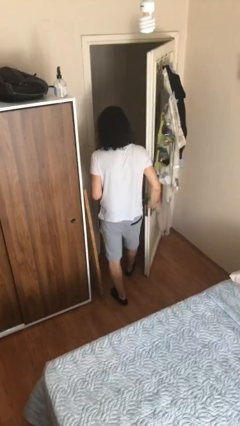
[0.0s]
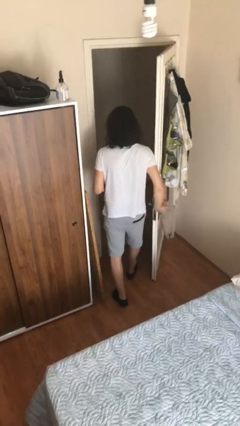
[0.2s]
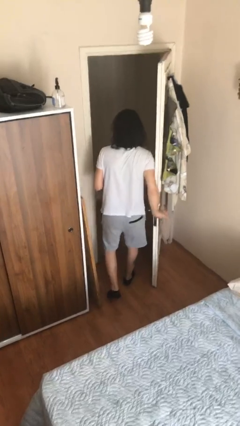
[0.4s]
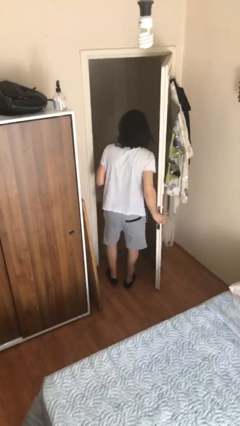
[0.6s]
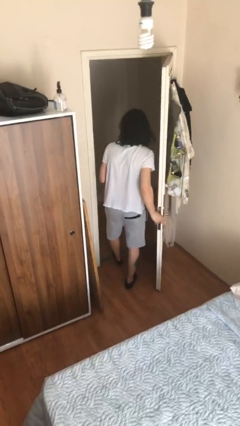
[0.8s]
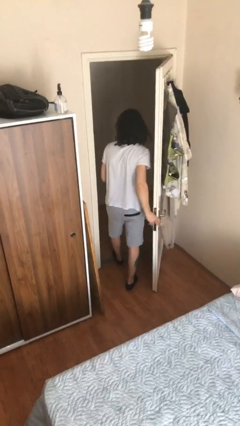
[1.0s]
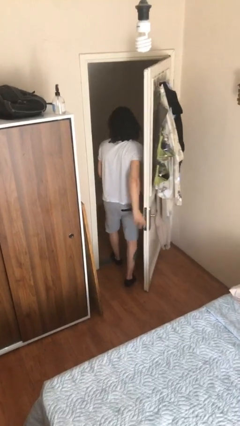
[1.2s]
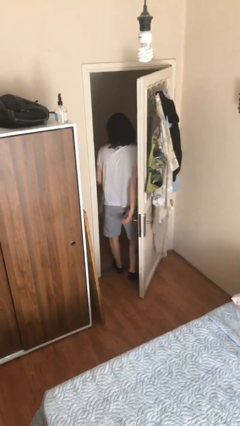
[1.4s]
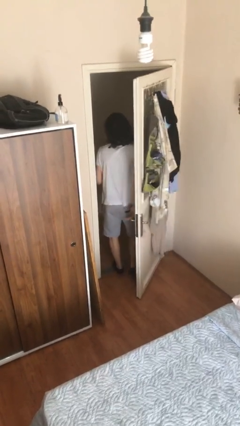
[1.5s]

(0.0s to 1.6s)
person exits scene through structure

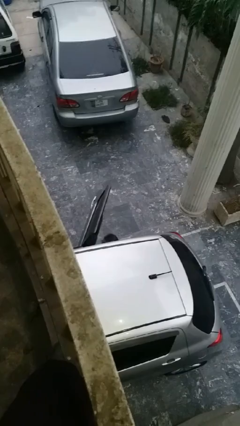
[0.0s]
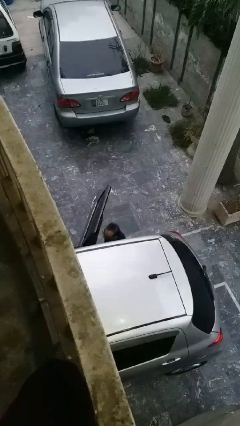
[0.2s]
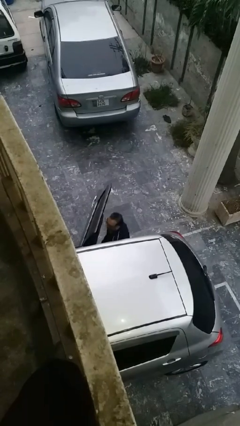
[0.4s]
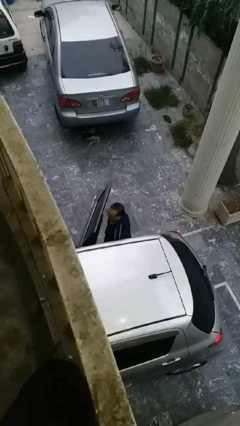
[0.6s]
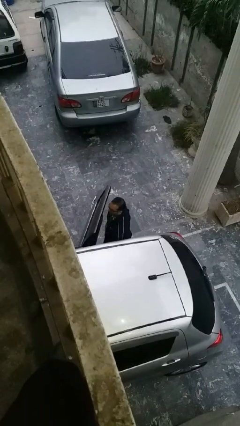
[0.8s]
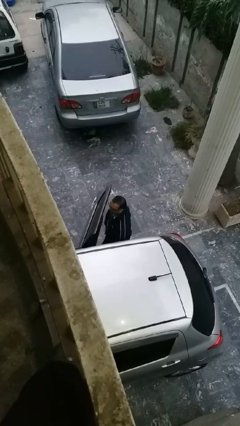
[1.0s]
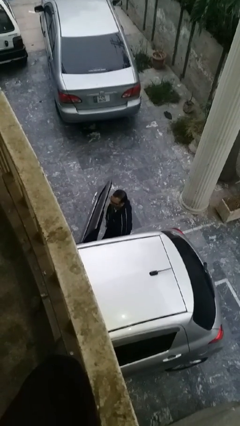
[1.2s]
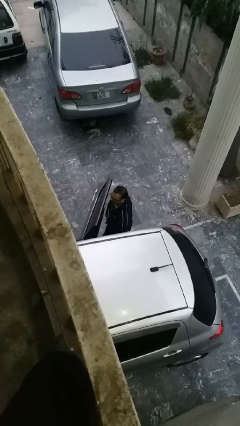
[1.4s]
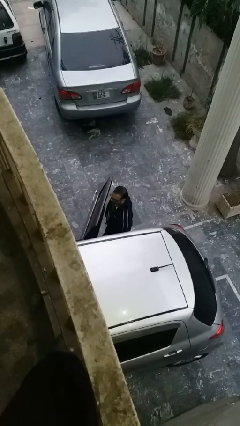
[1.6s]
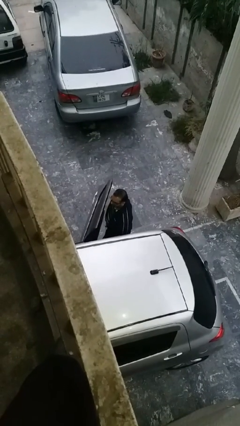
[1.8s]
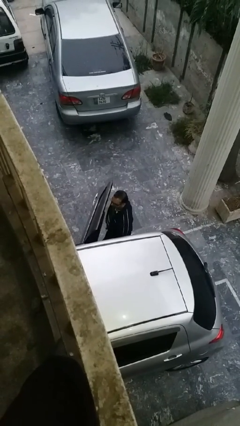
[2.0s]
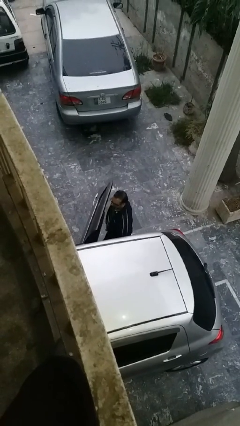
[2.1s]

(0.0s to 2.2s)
person exits car

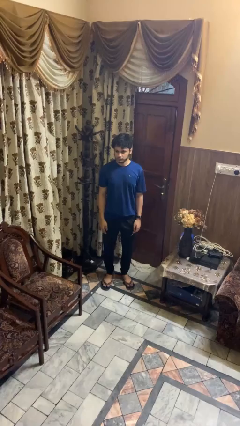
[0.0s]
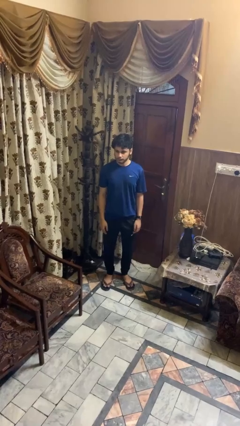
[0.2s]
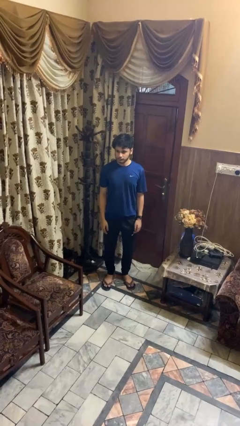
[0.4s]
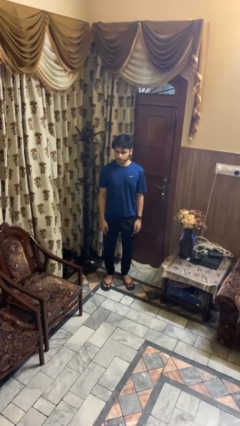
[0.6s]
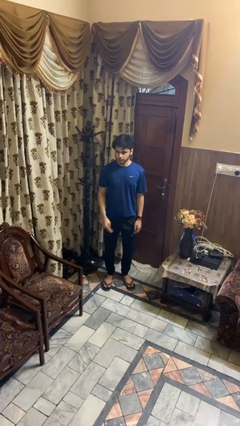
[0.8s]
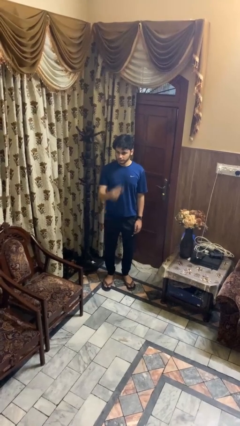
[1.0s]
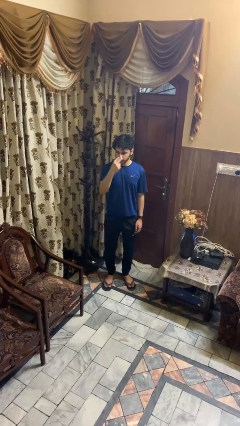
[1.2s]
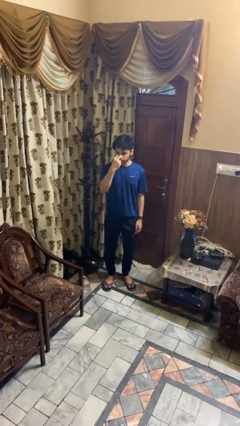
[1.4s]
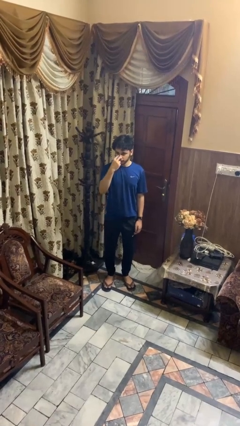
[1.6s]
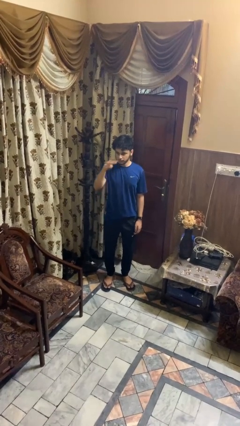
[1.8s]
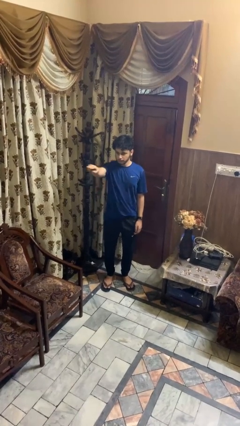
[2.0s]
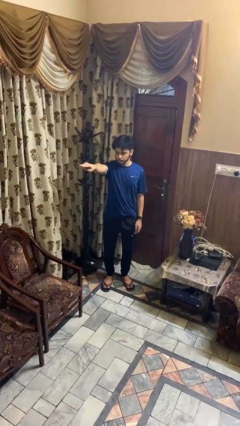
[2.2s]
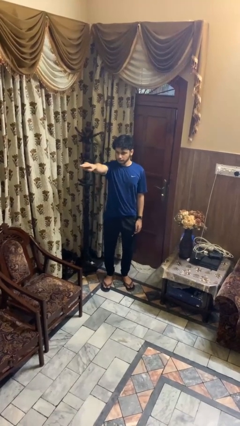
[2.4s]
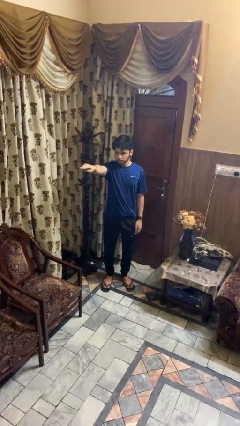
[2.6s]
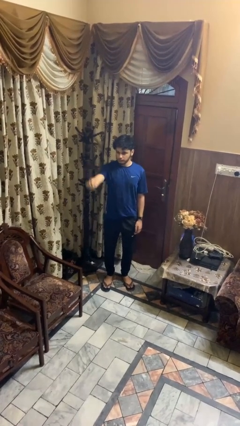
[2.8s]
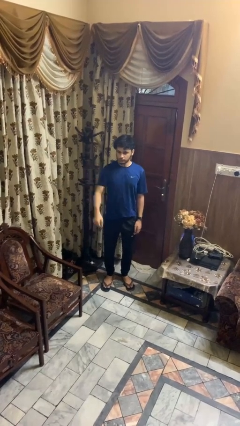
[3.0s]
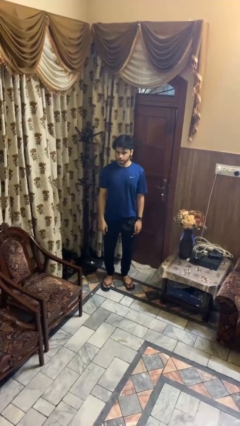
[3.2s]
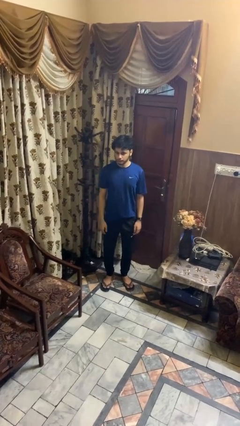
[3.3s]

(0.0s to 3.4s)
person gestures watch closely

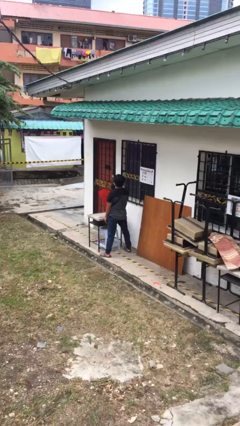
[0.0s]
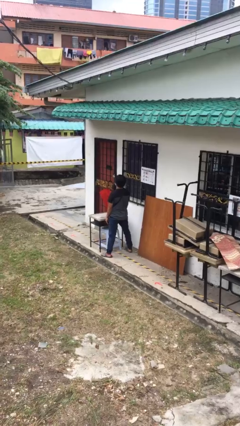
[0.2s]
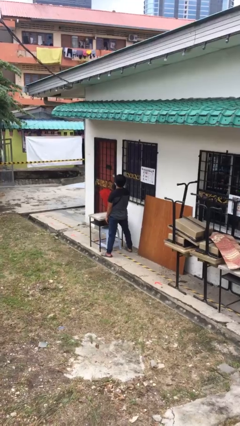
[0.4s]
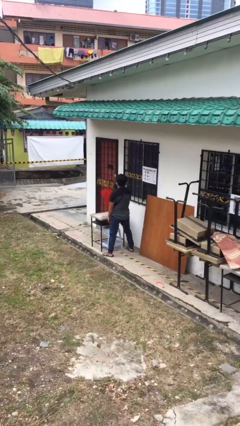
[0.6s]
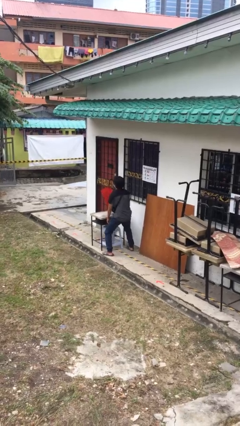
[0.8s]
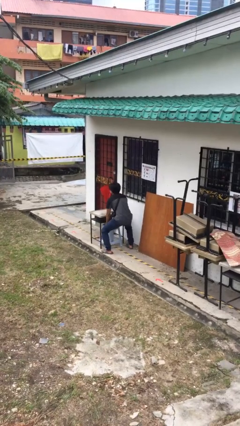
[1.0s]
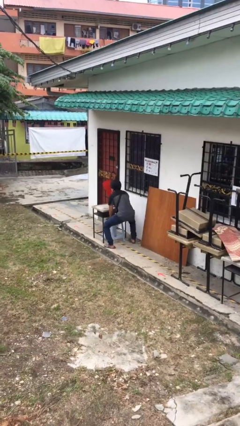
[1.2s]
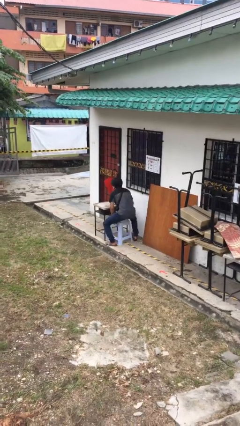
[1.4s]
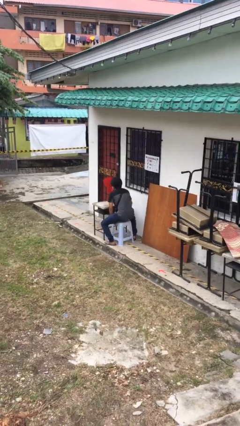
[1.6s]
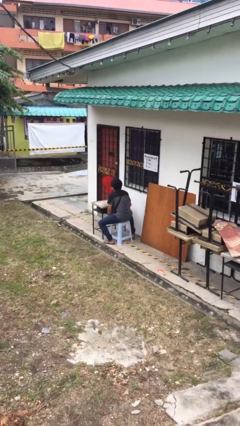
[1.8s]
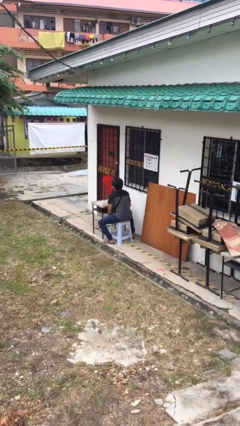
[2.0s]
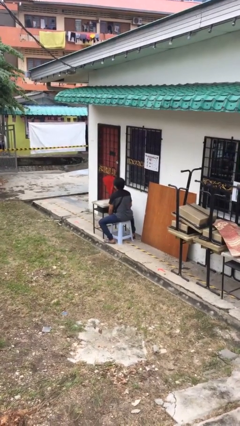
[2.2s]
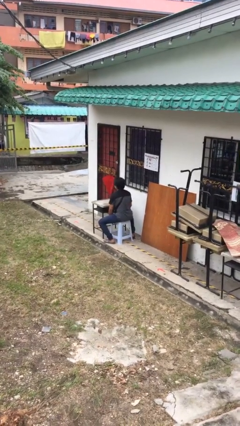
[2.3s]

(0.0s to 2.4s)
person sits down

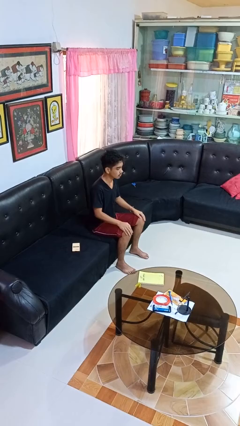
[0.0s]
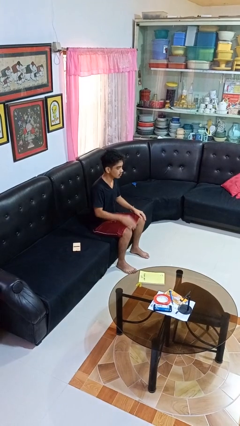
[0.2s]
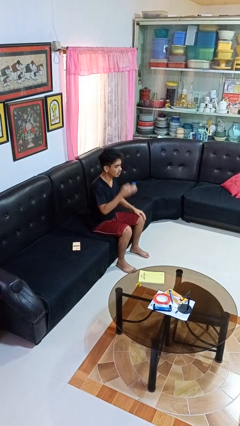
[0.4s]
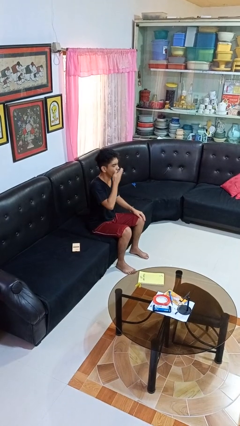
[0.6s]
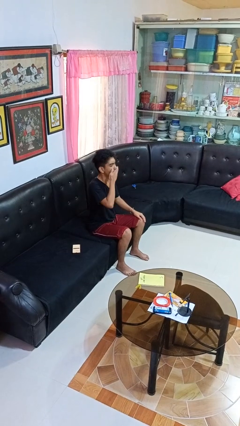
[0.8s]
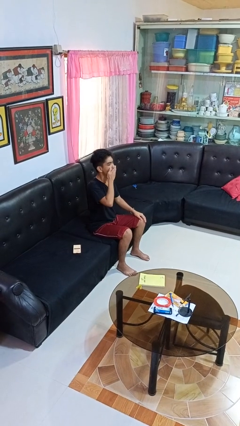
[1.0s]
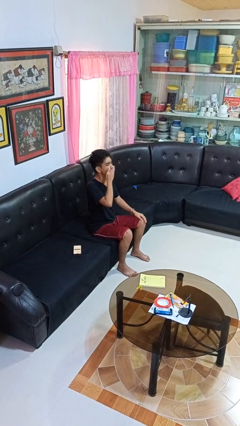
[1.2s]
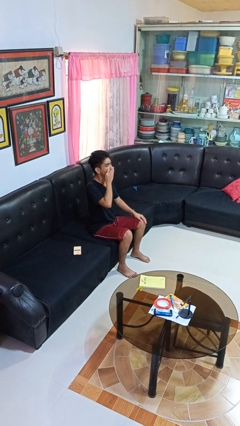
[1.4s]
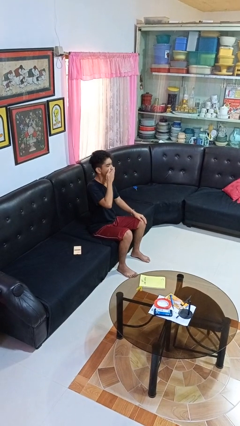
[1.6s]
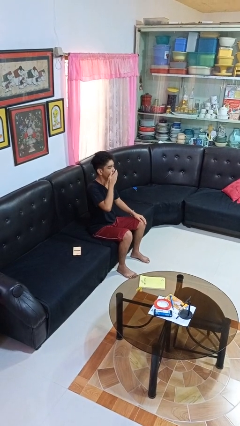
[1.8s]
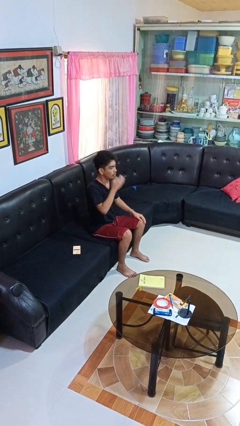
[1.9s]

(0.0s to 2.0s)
person yawns

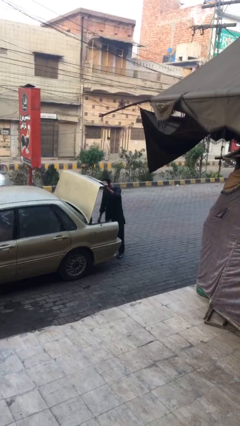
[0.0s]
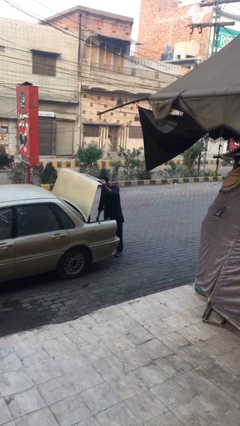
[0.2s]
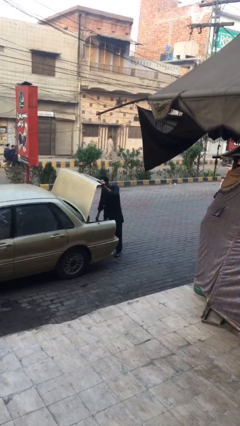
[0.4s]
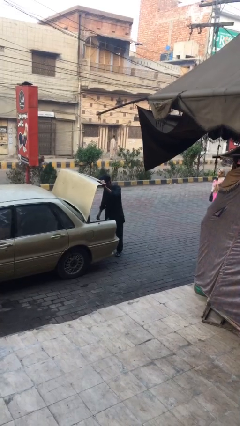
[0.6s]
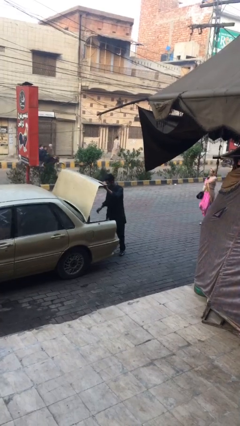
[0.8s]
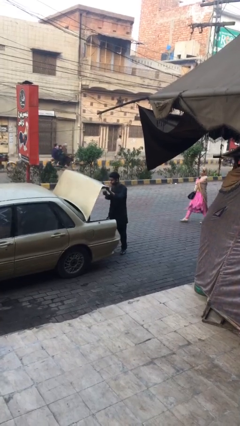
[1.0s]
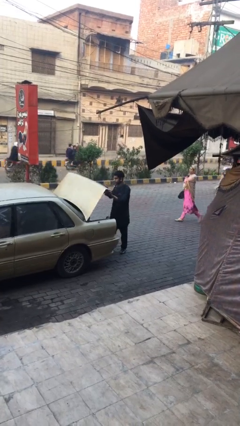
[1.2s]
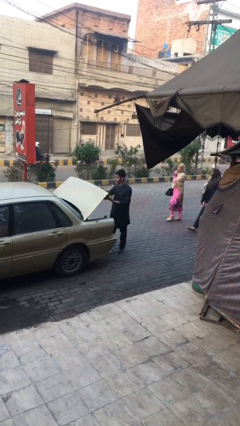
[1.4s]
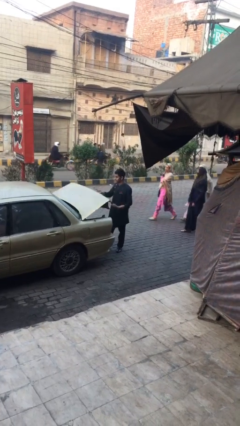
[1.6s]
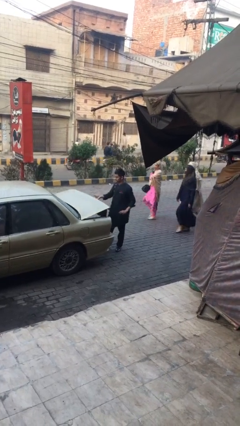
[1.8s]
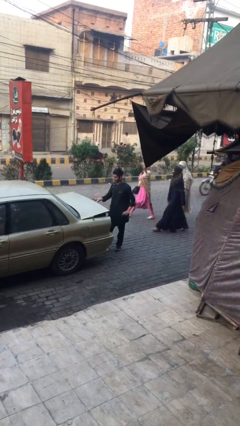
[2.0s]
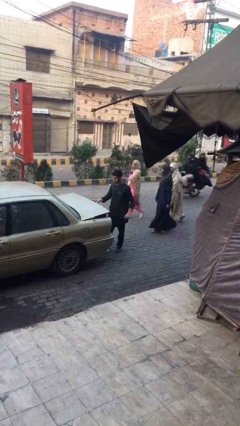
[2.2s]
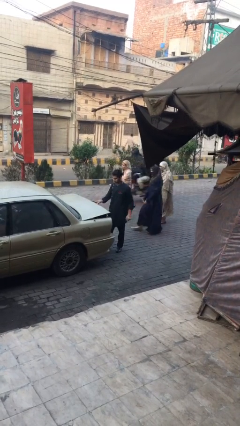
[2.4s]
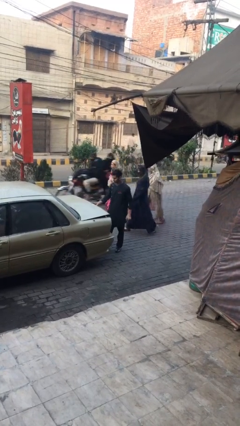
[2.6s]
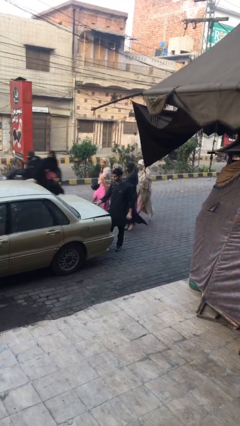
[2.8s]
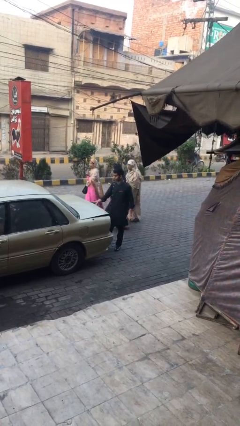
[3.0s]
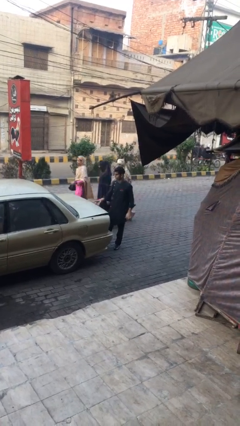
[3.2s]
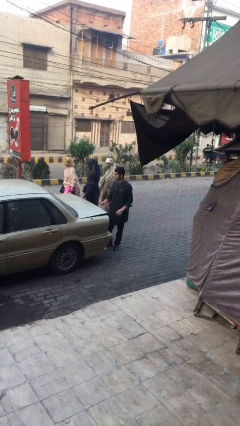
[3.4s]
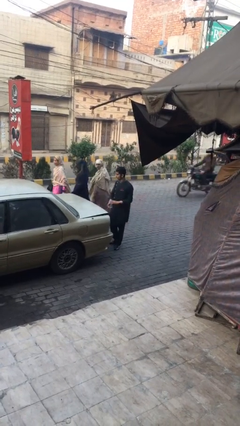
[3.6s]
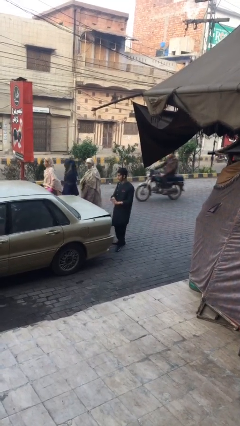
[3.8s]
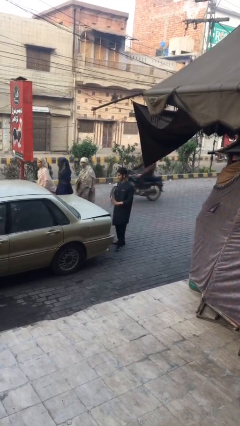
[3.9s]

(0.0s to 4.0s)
person closes car trunk

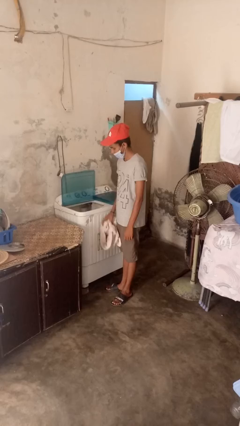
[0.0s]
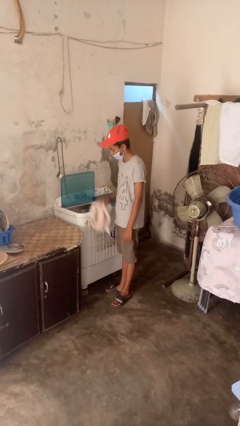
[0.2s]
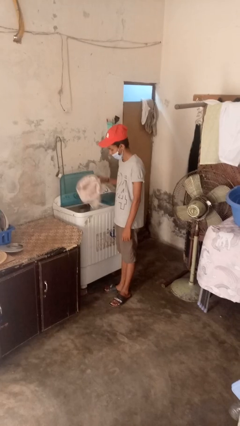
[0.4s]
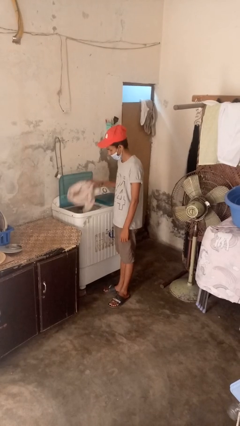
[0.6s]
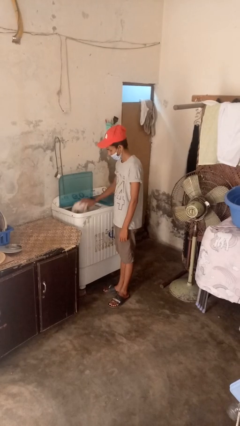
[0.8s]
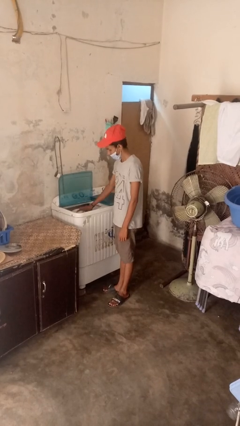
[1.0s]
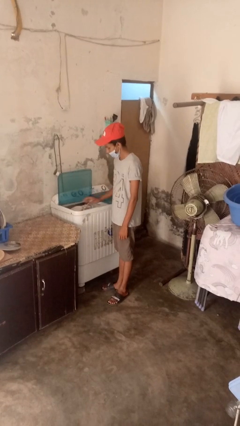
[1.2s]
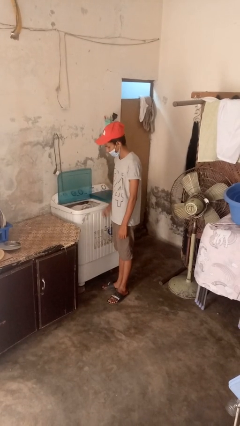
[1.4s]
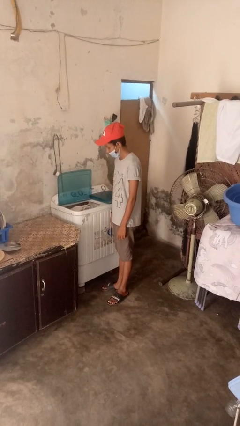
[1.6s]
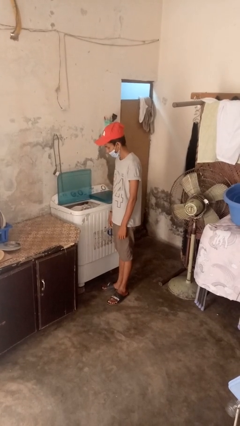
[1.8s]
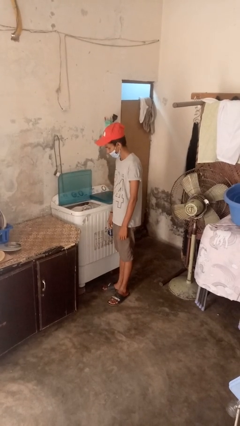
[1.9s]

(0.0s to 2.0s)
person loads dryer
